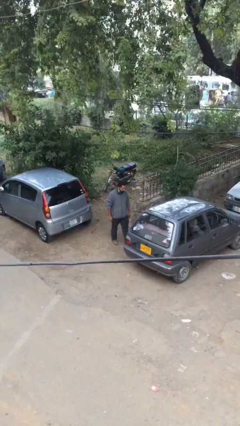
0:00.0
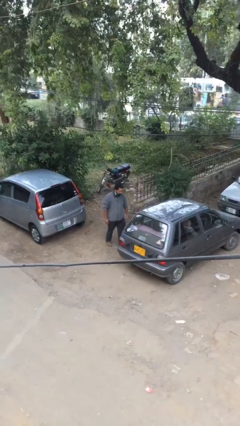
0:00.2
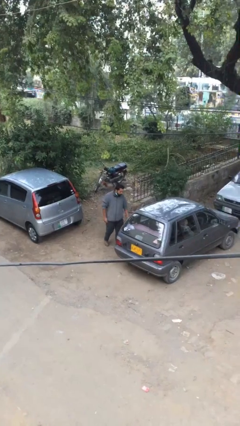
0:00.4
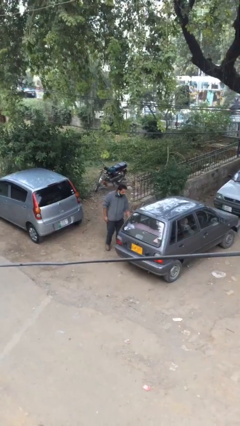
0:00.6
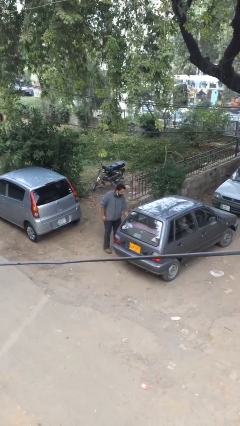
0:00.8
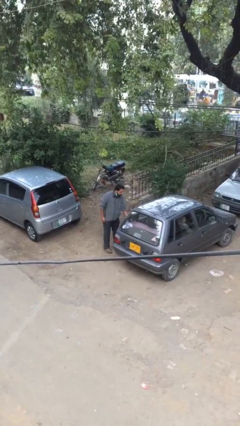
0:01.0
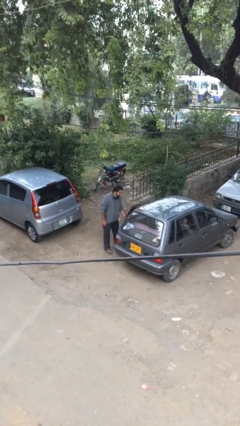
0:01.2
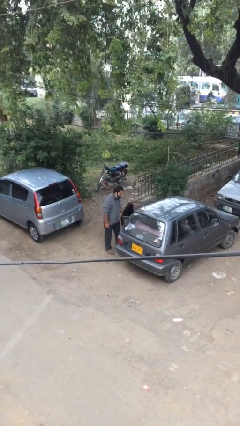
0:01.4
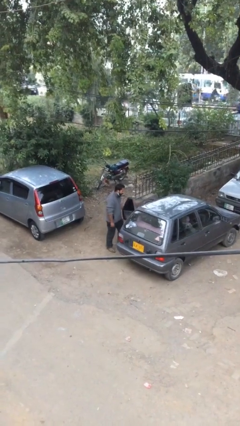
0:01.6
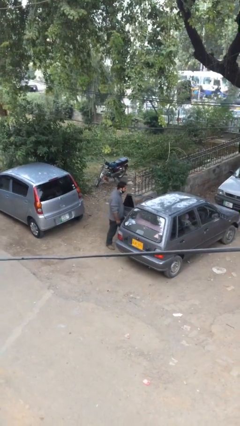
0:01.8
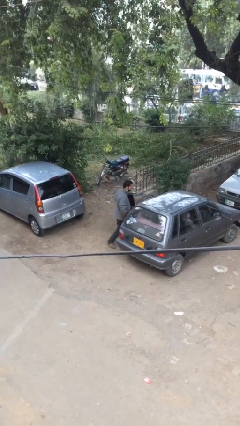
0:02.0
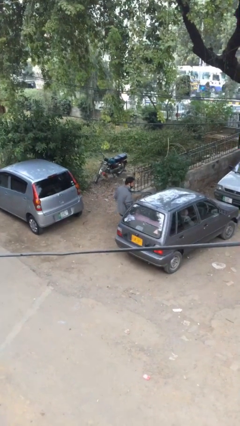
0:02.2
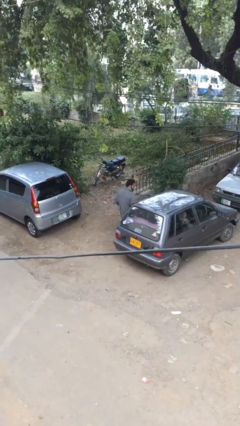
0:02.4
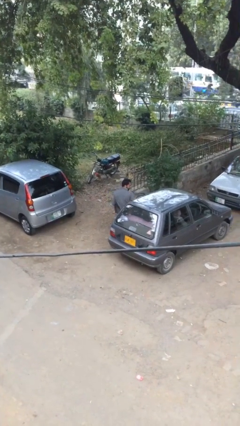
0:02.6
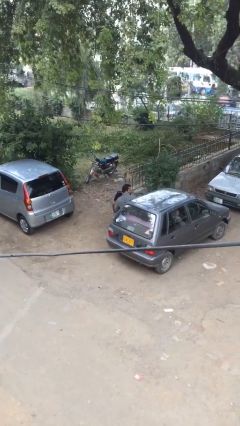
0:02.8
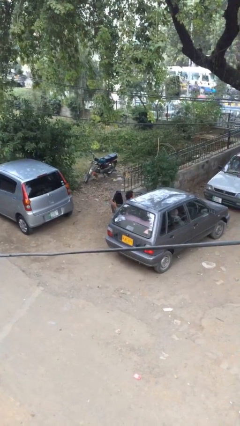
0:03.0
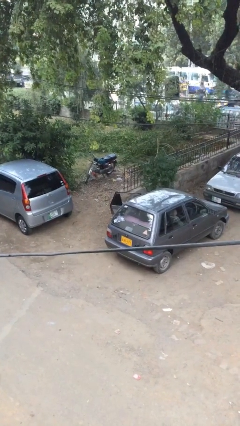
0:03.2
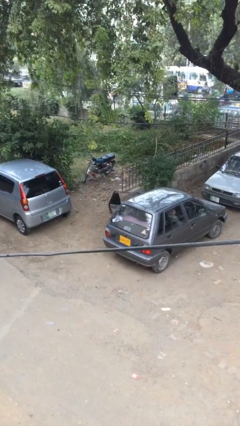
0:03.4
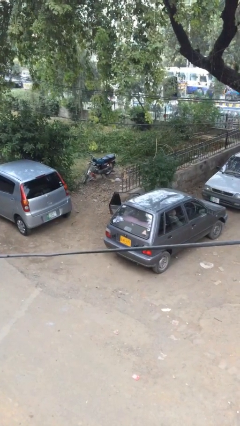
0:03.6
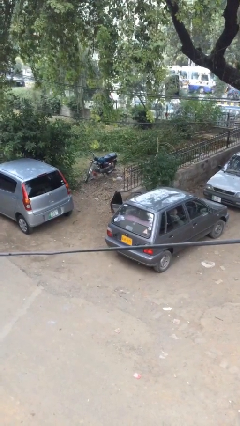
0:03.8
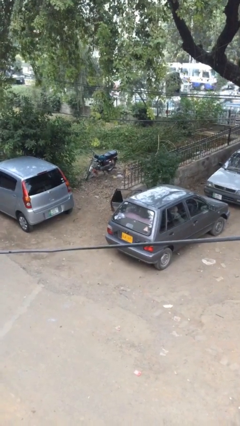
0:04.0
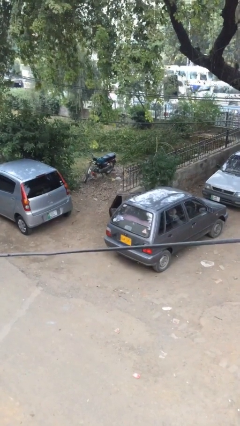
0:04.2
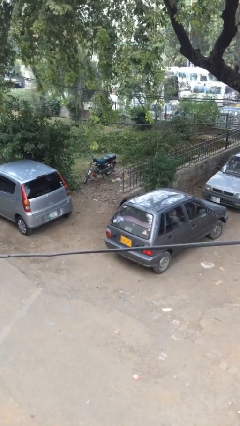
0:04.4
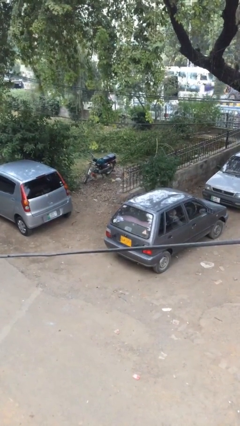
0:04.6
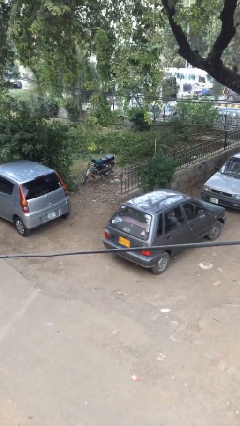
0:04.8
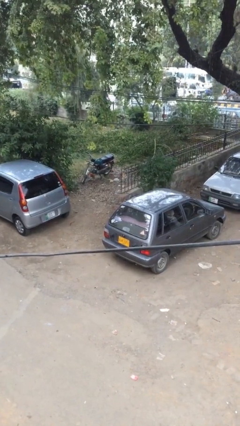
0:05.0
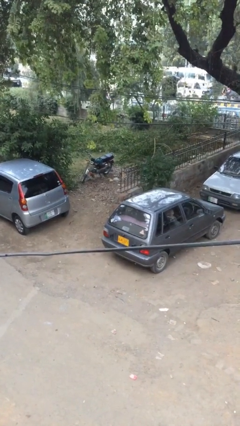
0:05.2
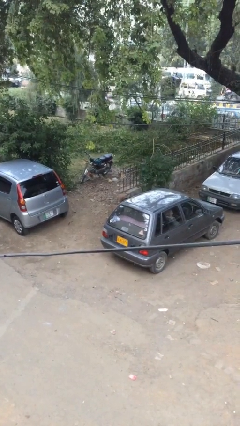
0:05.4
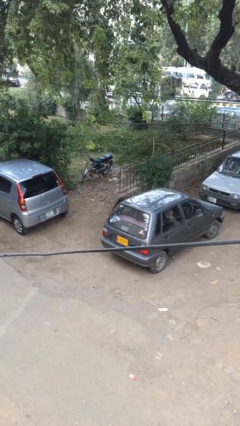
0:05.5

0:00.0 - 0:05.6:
car picks up person

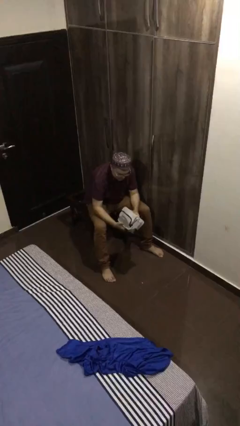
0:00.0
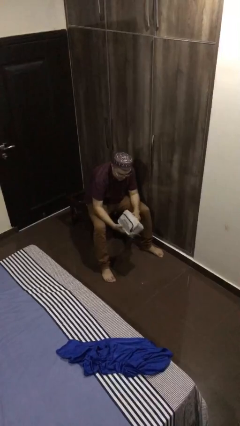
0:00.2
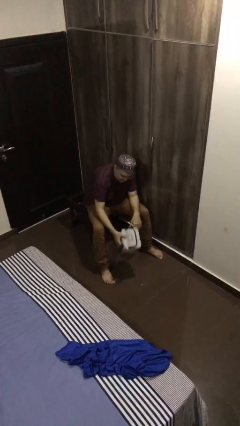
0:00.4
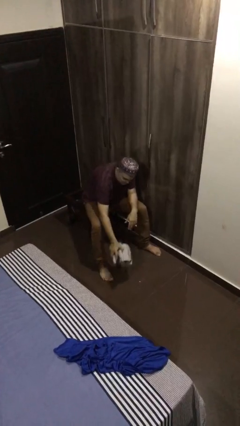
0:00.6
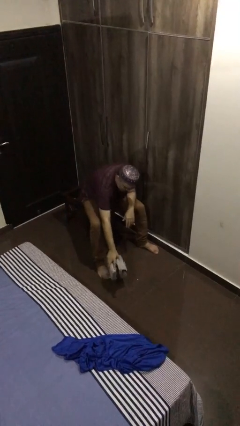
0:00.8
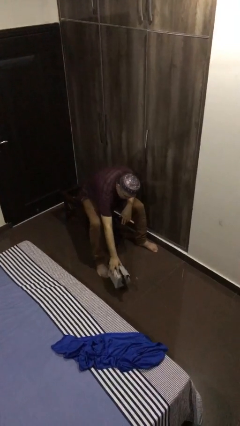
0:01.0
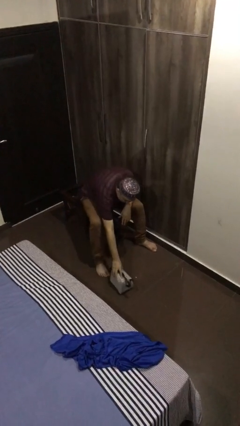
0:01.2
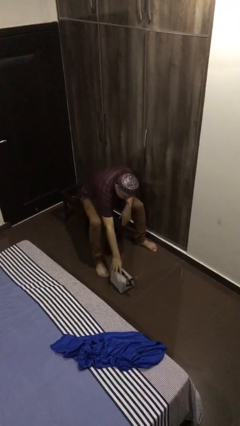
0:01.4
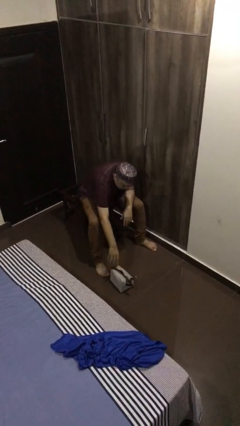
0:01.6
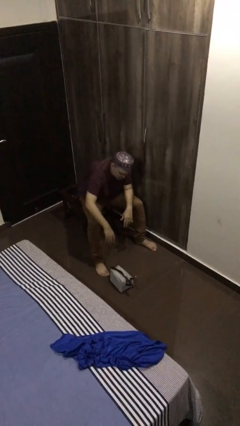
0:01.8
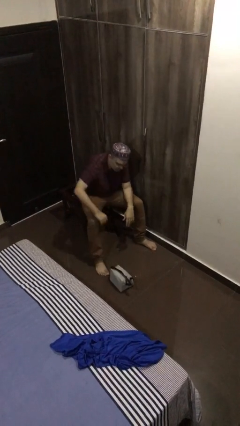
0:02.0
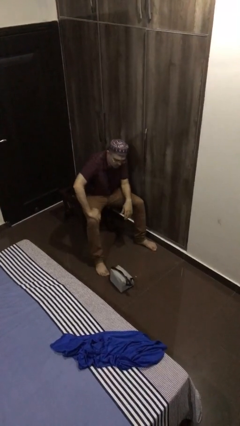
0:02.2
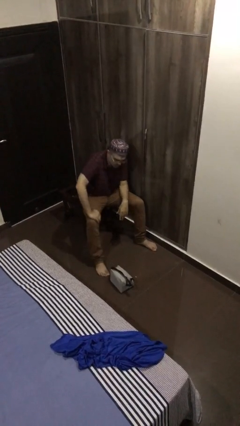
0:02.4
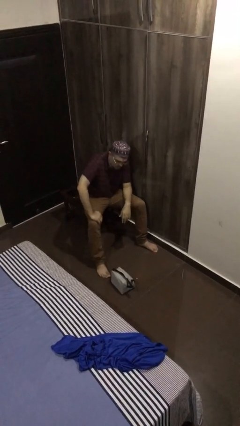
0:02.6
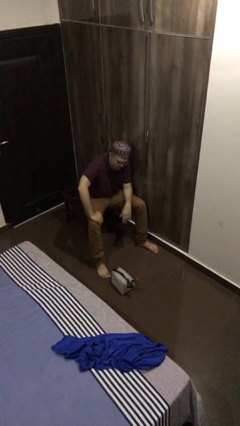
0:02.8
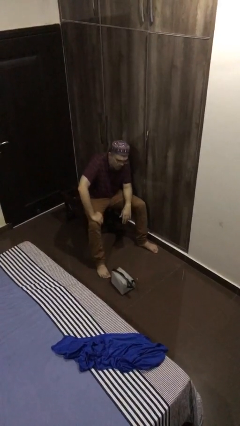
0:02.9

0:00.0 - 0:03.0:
person puts down object on floor

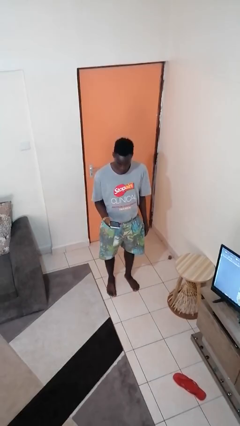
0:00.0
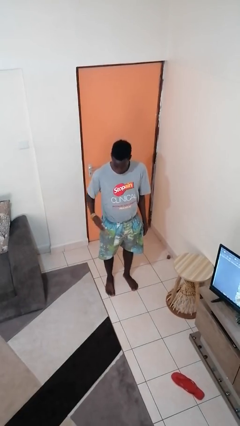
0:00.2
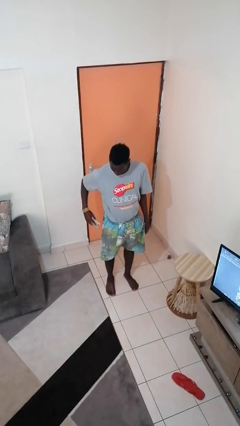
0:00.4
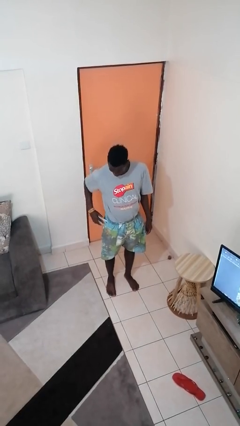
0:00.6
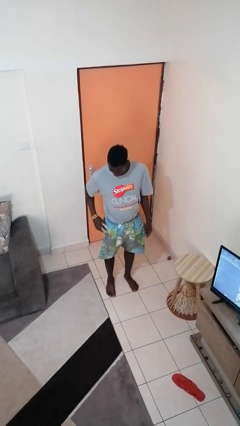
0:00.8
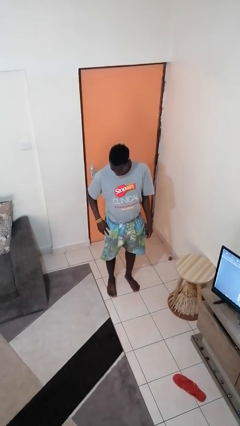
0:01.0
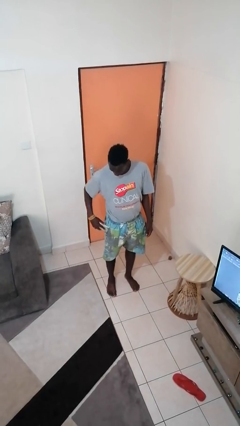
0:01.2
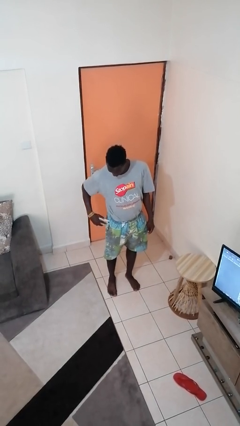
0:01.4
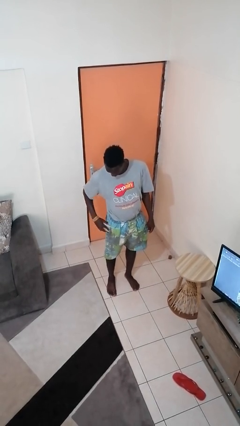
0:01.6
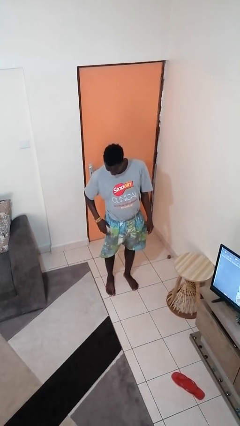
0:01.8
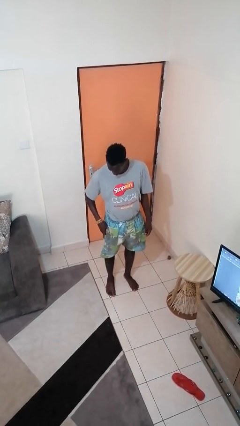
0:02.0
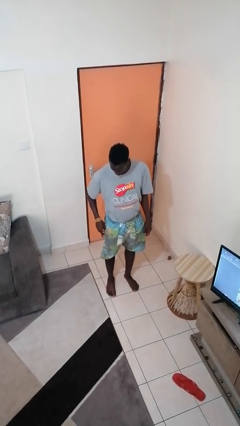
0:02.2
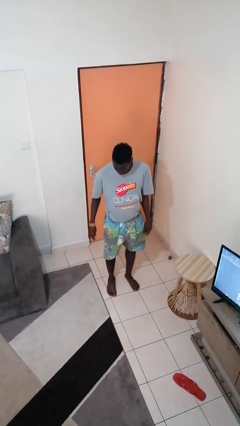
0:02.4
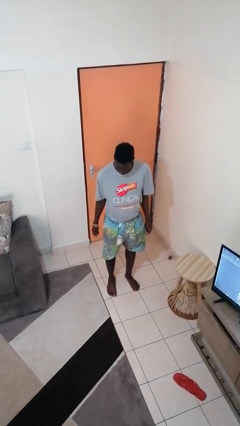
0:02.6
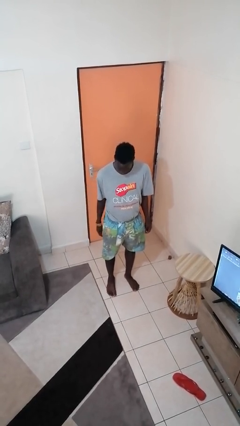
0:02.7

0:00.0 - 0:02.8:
person puts phone into pocket

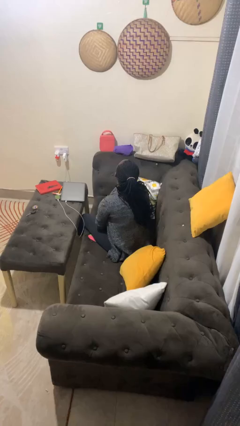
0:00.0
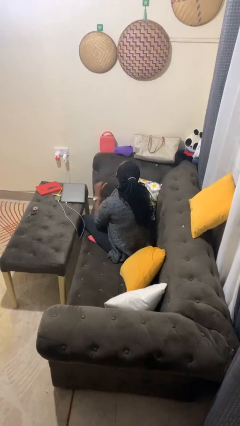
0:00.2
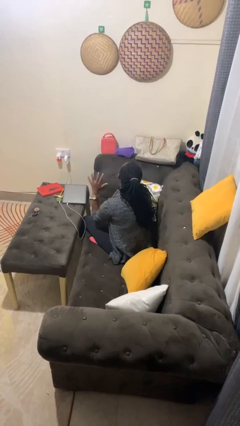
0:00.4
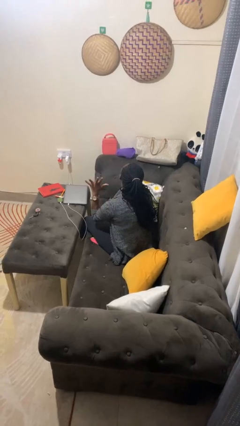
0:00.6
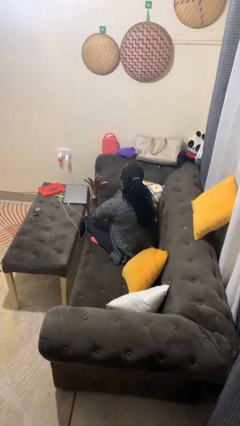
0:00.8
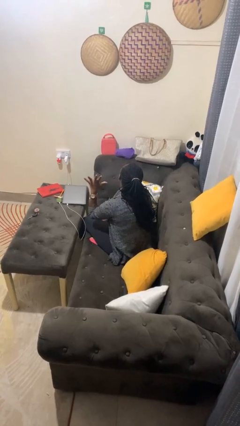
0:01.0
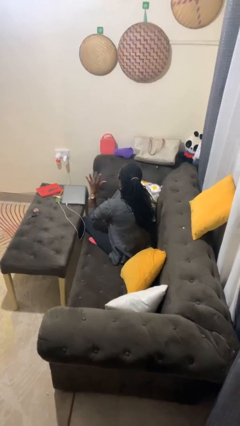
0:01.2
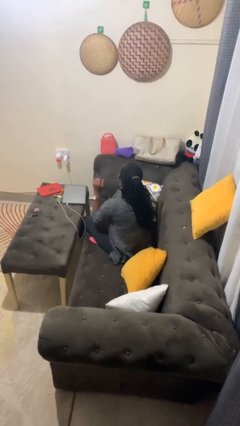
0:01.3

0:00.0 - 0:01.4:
person gestures number five

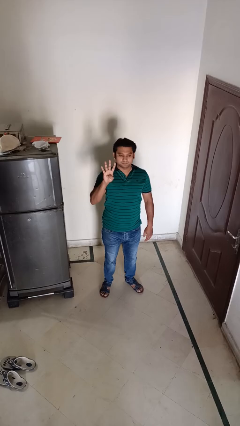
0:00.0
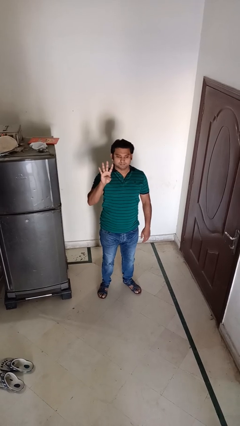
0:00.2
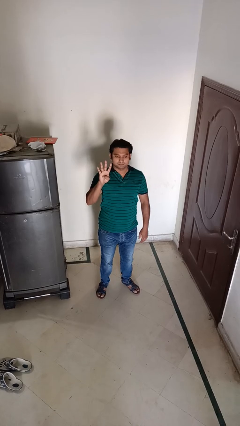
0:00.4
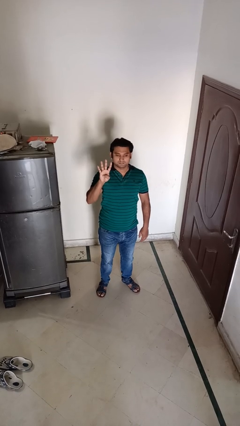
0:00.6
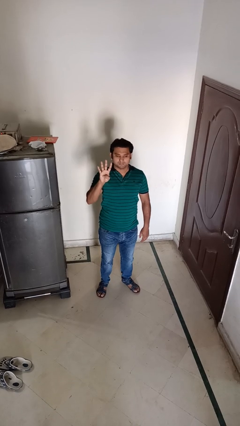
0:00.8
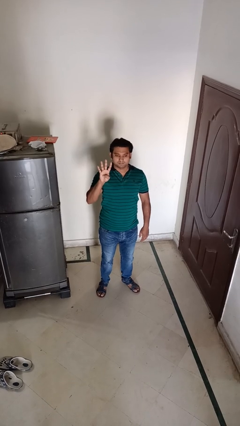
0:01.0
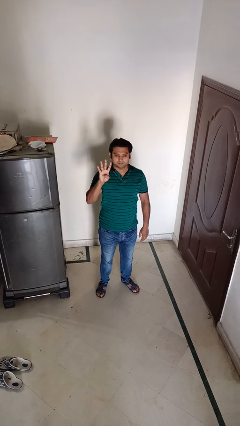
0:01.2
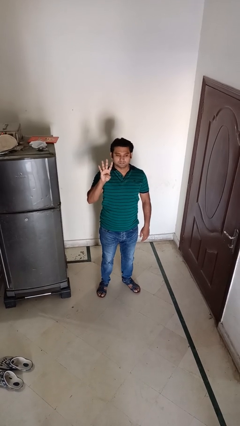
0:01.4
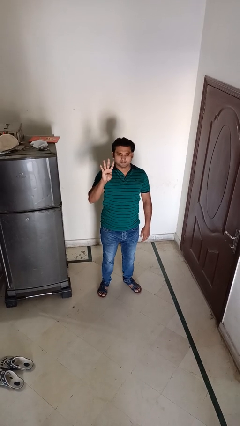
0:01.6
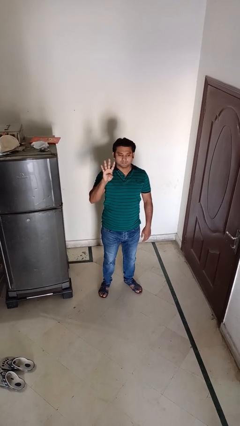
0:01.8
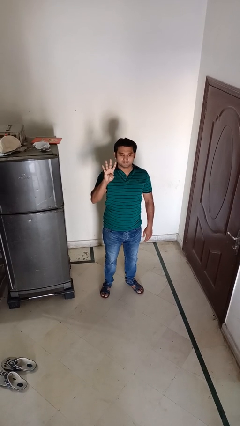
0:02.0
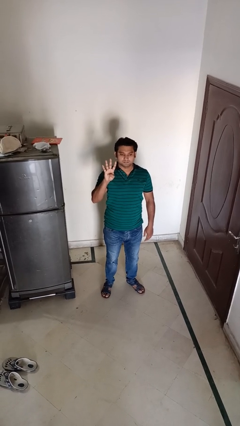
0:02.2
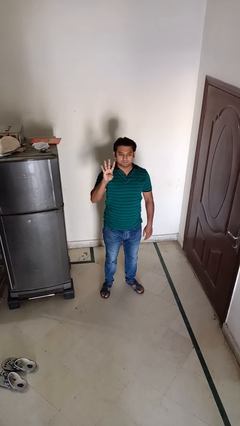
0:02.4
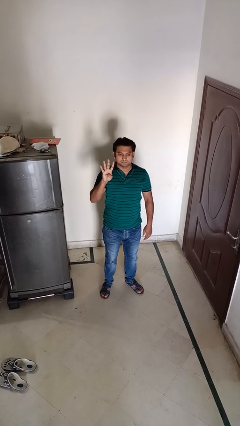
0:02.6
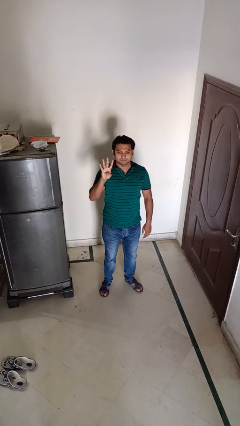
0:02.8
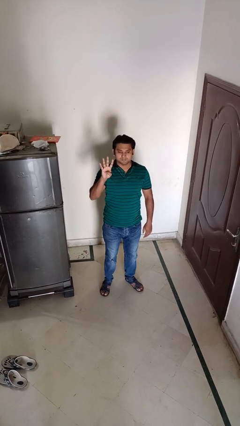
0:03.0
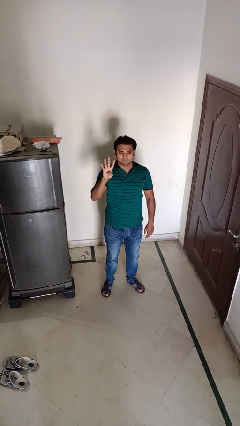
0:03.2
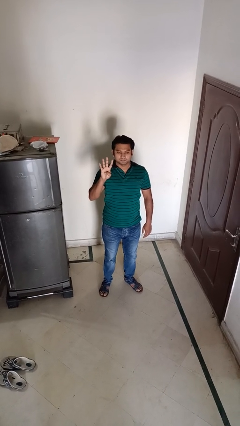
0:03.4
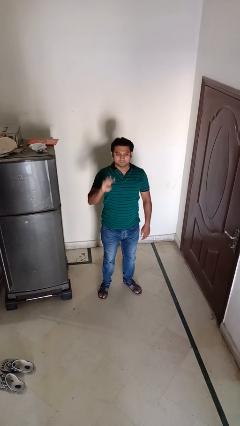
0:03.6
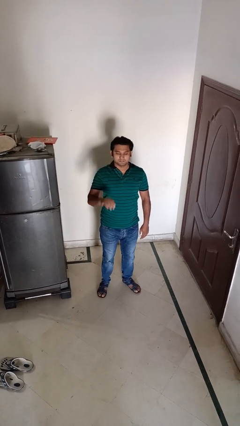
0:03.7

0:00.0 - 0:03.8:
person gestures number four

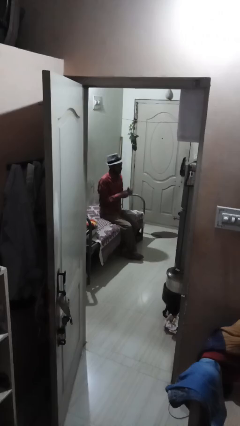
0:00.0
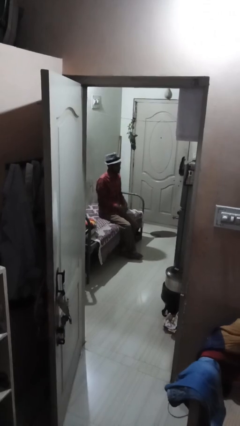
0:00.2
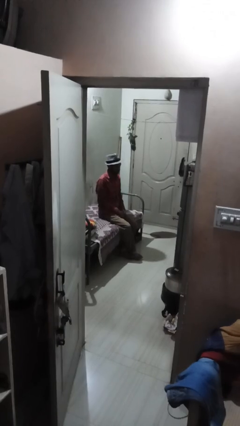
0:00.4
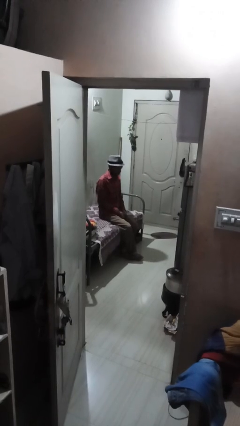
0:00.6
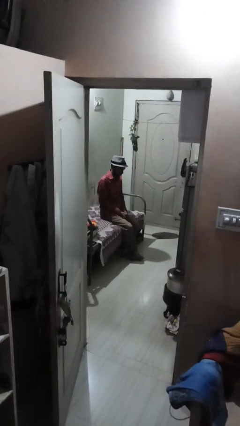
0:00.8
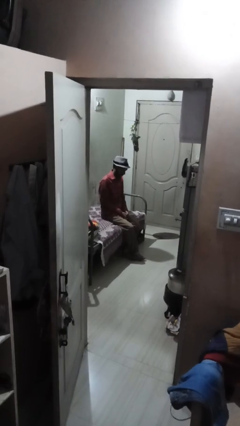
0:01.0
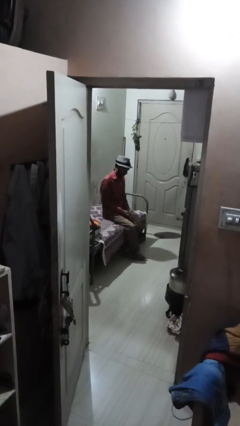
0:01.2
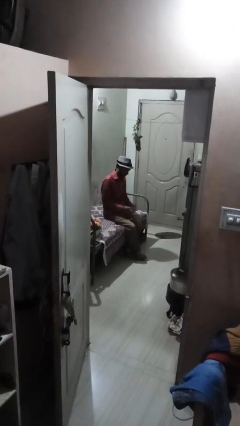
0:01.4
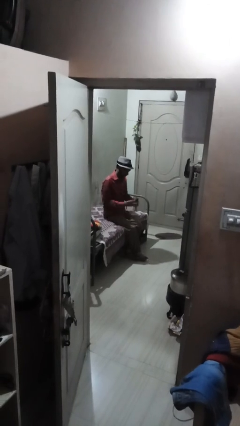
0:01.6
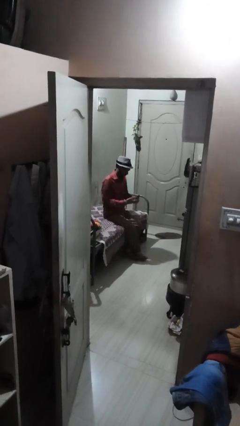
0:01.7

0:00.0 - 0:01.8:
person cracks knuckles
